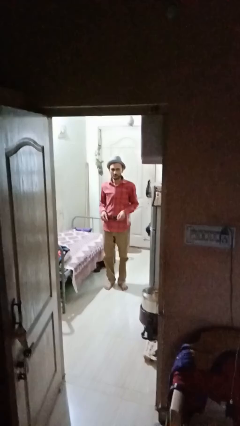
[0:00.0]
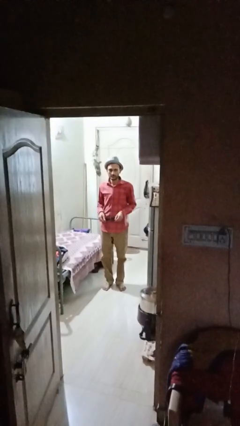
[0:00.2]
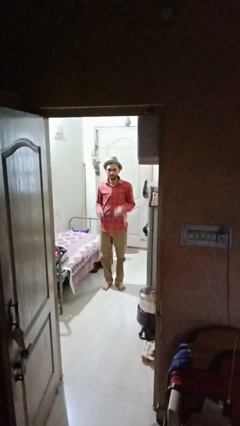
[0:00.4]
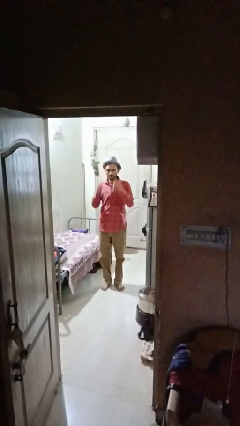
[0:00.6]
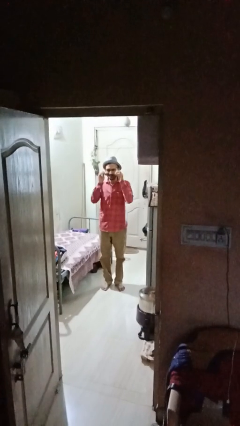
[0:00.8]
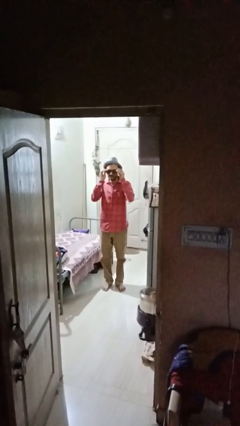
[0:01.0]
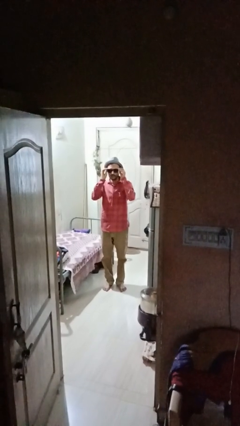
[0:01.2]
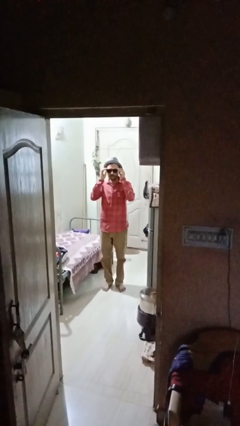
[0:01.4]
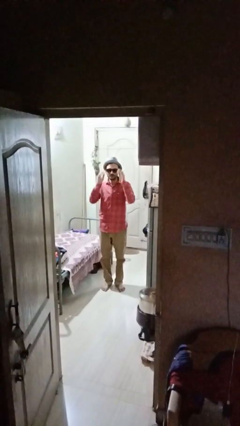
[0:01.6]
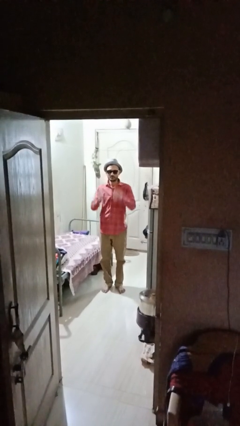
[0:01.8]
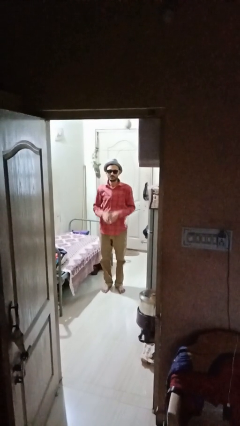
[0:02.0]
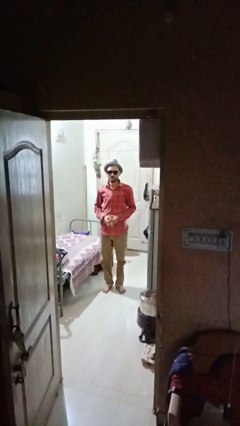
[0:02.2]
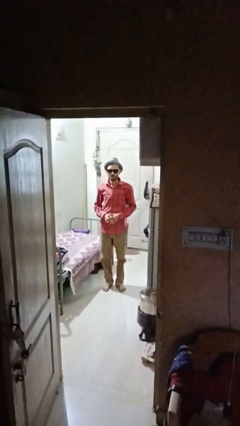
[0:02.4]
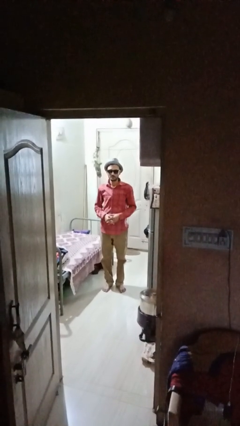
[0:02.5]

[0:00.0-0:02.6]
person puts on sunglasses

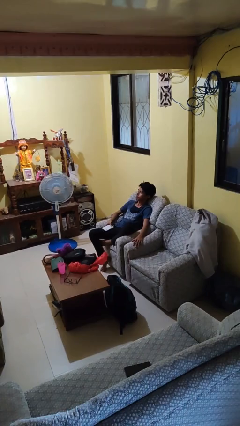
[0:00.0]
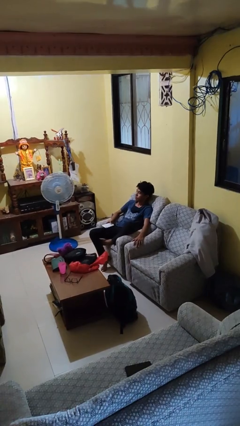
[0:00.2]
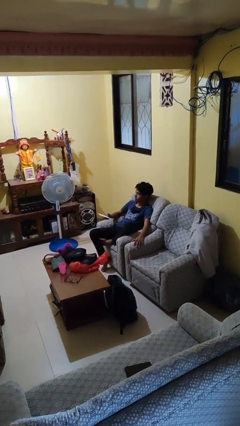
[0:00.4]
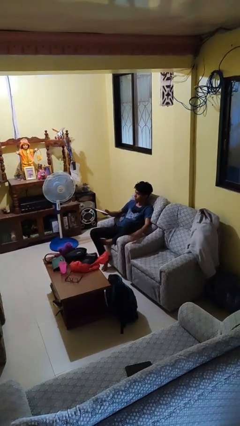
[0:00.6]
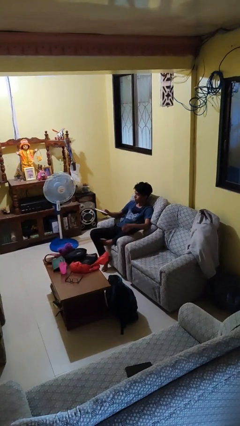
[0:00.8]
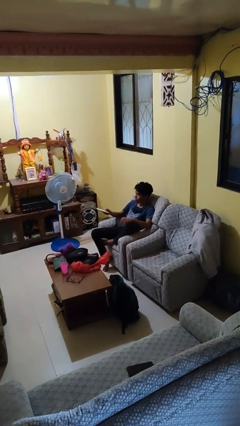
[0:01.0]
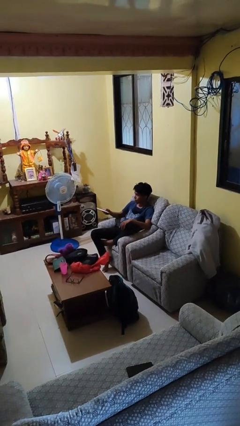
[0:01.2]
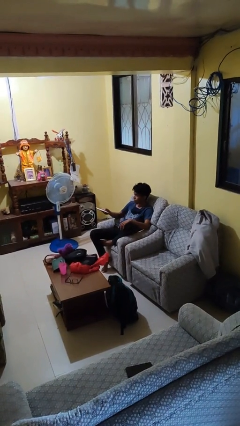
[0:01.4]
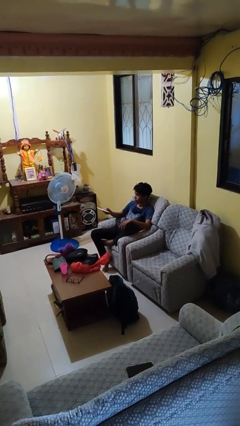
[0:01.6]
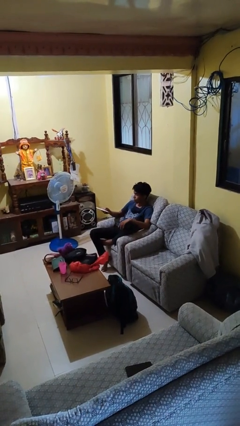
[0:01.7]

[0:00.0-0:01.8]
person uses television remote

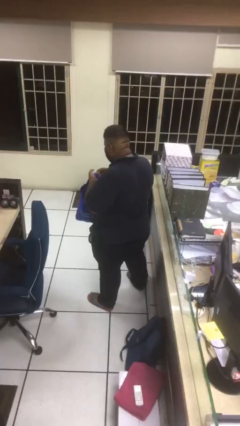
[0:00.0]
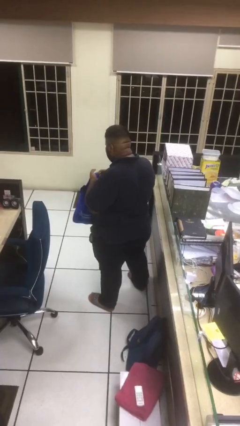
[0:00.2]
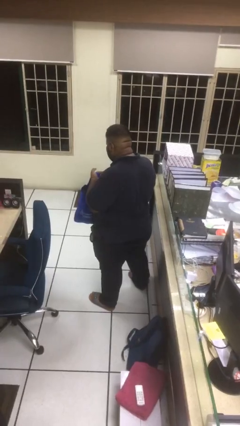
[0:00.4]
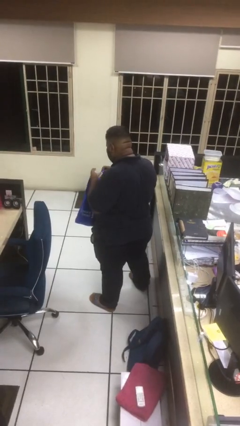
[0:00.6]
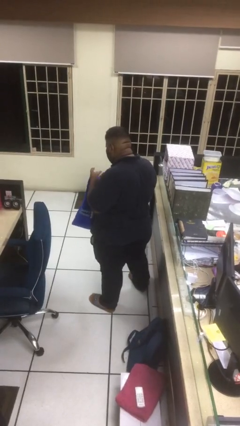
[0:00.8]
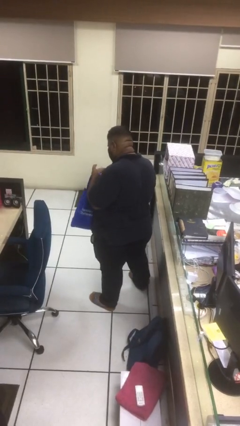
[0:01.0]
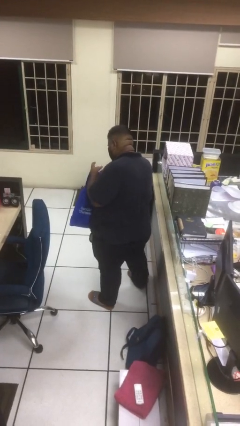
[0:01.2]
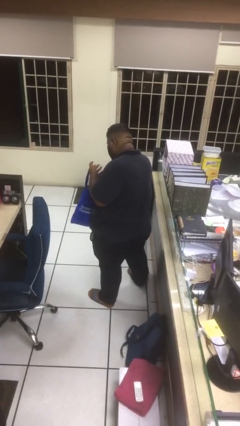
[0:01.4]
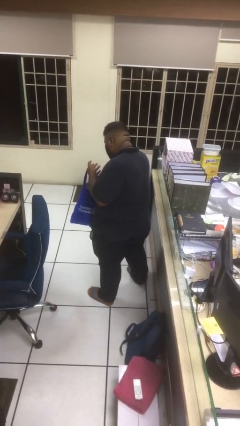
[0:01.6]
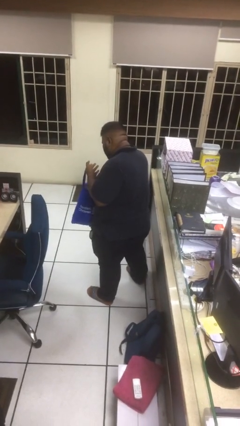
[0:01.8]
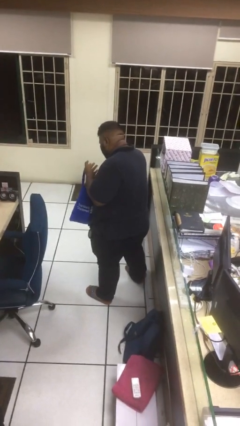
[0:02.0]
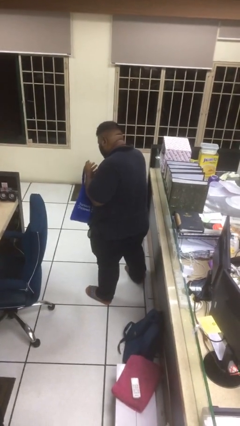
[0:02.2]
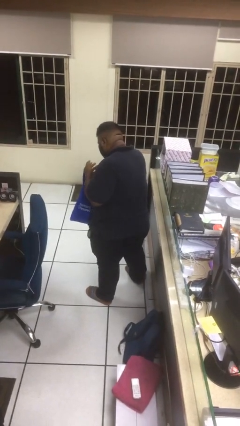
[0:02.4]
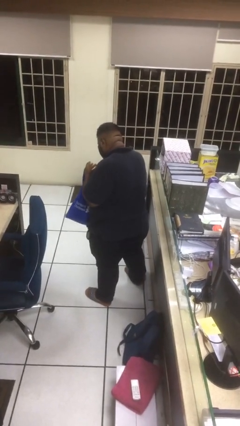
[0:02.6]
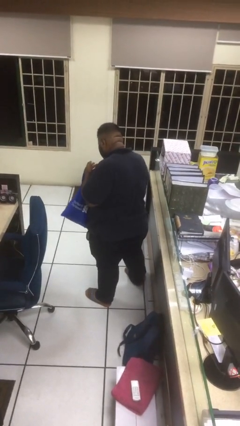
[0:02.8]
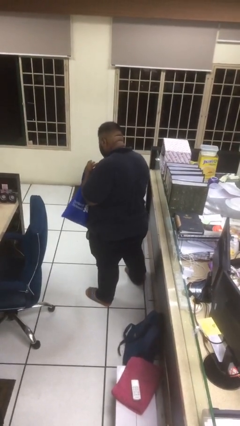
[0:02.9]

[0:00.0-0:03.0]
person searches in bag

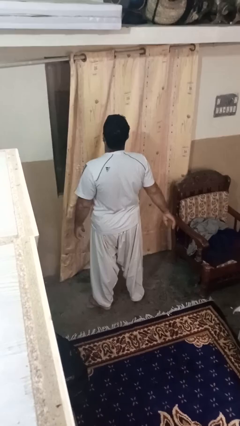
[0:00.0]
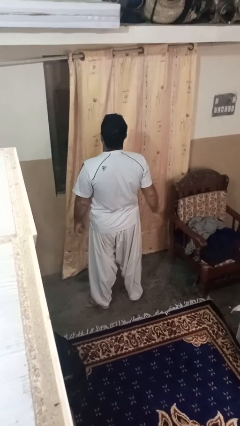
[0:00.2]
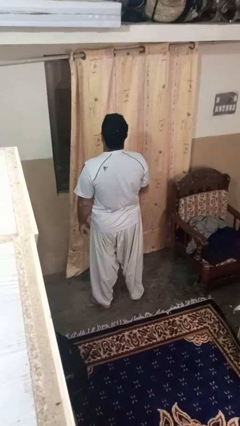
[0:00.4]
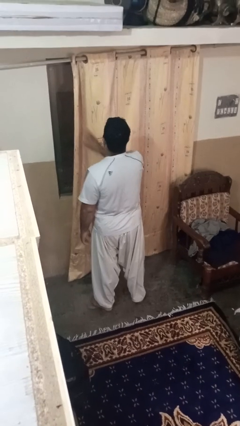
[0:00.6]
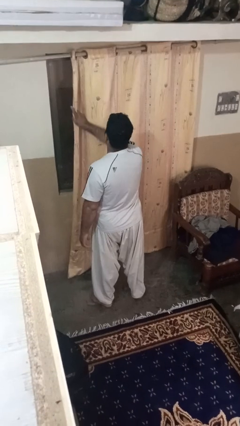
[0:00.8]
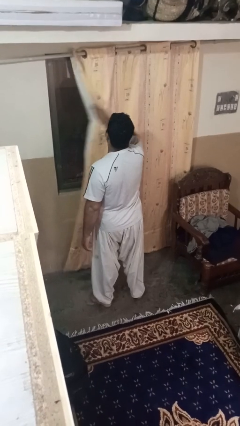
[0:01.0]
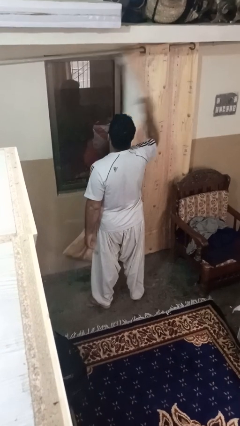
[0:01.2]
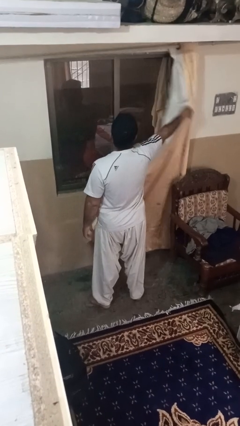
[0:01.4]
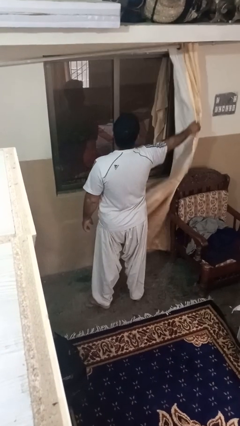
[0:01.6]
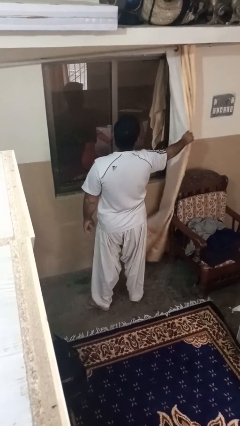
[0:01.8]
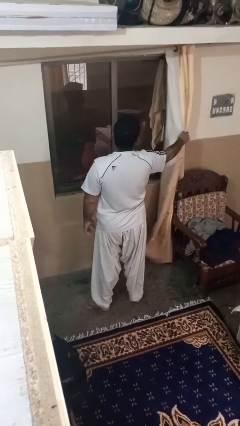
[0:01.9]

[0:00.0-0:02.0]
person opens curtains

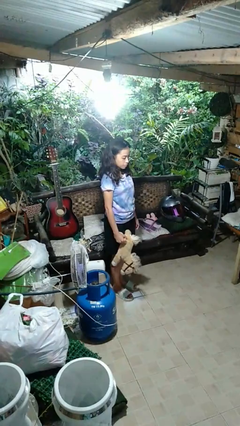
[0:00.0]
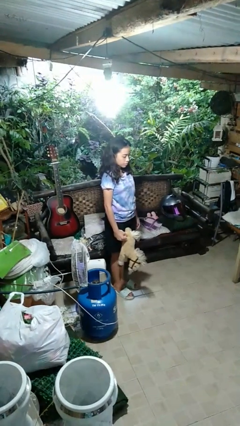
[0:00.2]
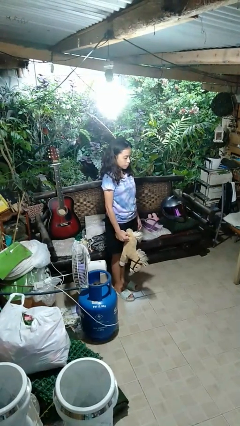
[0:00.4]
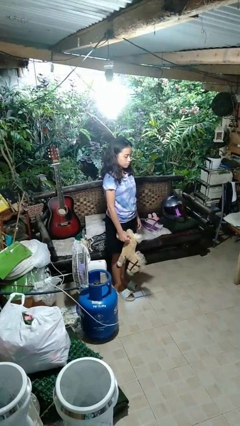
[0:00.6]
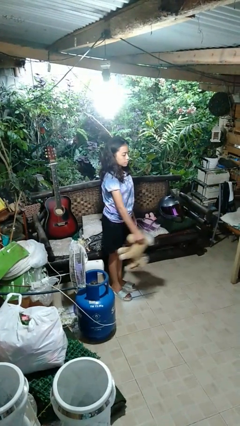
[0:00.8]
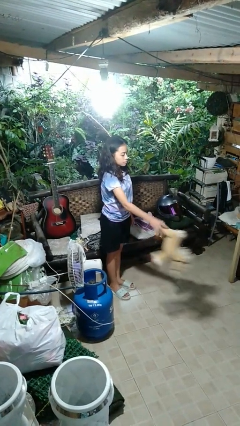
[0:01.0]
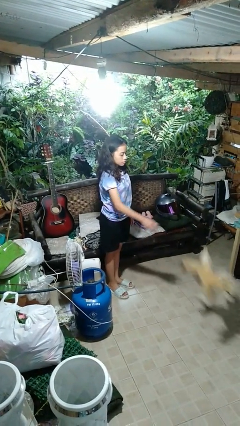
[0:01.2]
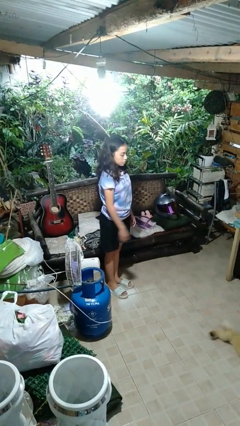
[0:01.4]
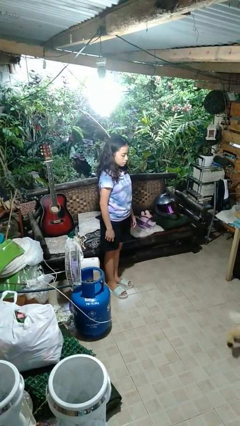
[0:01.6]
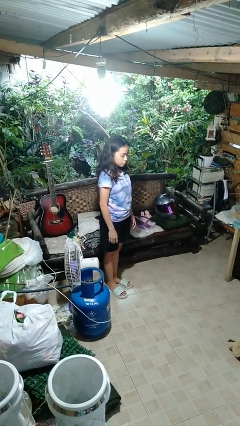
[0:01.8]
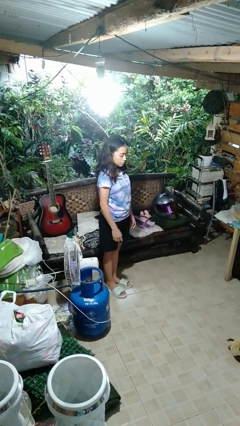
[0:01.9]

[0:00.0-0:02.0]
person throws object to ground

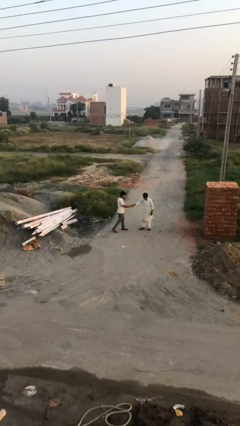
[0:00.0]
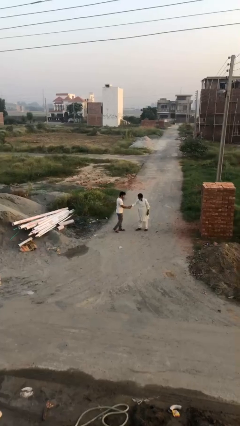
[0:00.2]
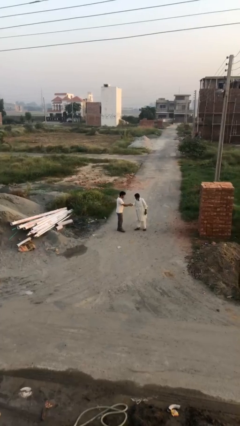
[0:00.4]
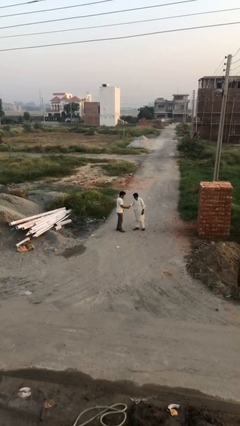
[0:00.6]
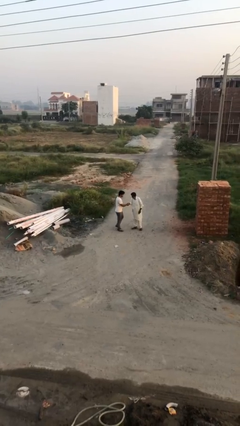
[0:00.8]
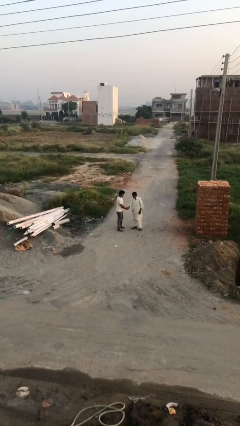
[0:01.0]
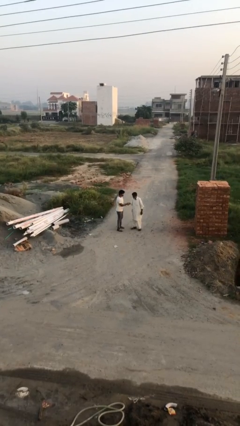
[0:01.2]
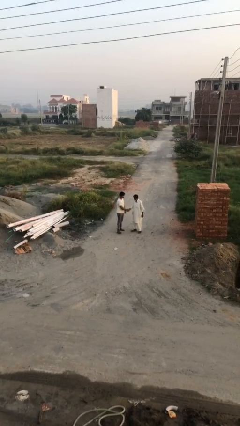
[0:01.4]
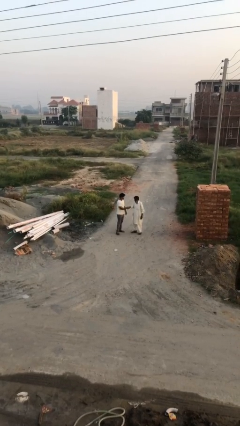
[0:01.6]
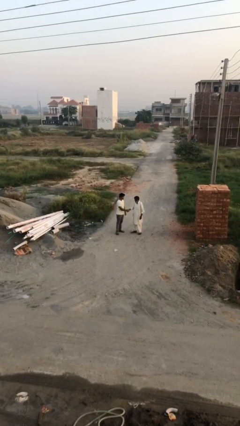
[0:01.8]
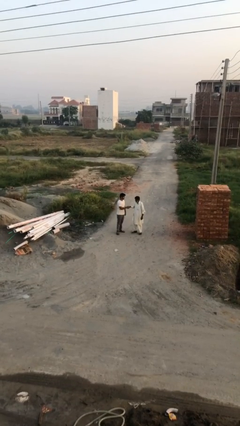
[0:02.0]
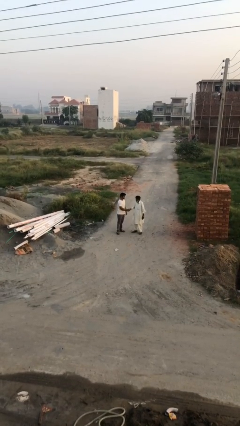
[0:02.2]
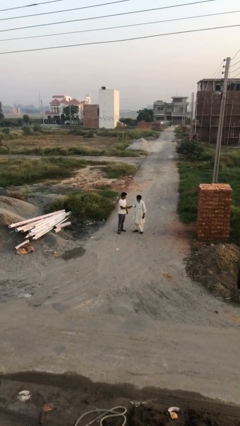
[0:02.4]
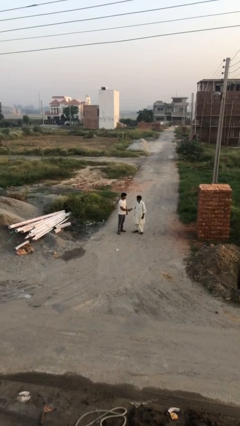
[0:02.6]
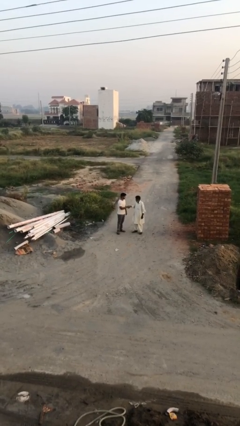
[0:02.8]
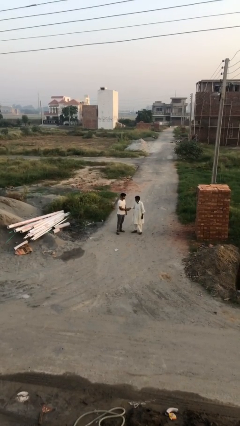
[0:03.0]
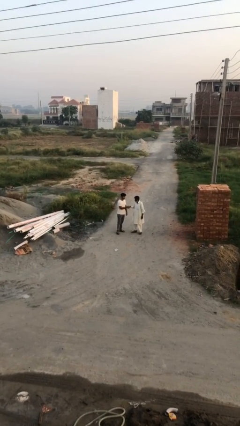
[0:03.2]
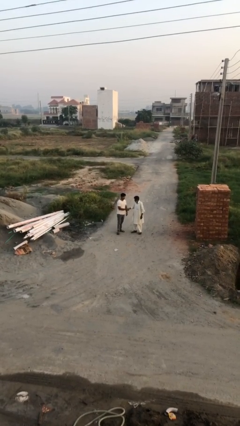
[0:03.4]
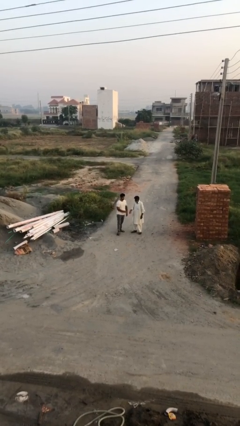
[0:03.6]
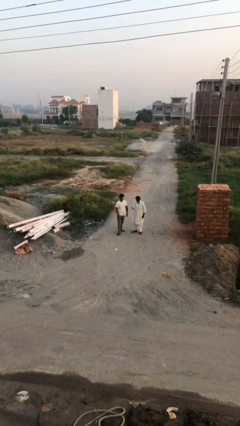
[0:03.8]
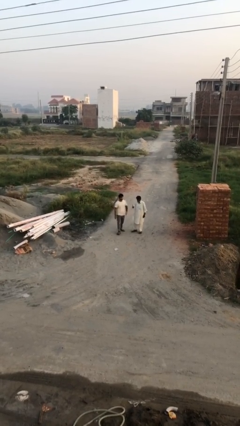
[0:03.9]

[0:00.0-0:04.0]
person shakes hand

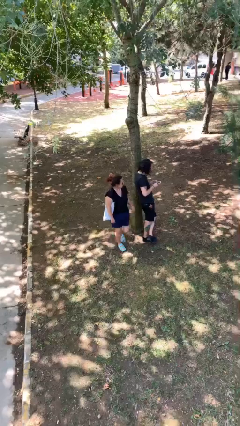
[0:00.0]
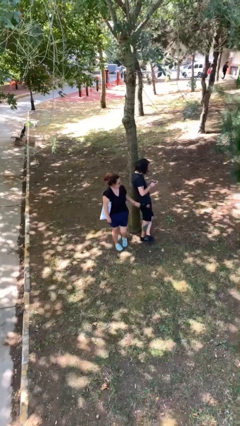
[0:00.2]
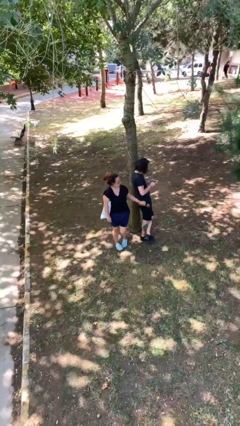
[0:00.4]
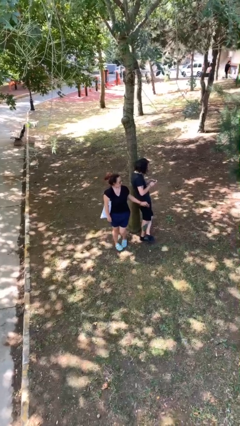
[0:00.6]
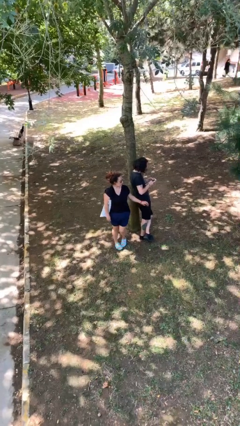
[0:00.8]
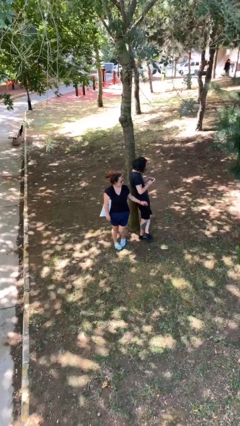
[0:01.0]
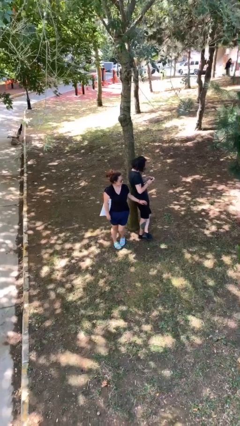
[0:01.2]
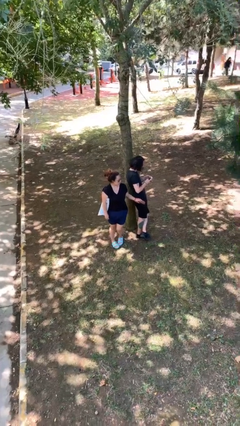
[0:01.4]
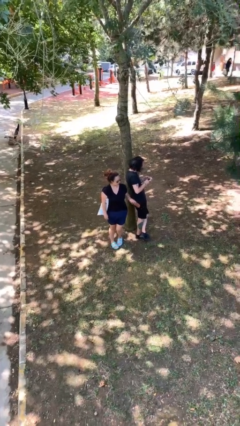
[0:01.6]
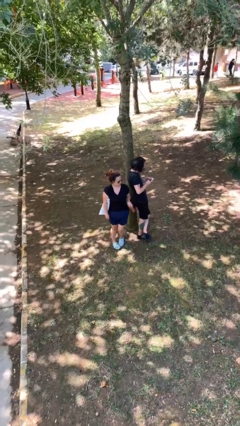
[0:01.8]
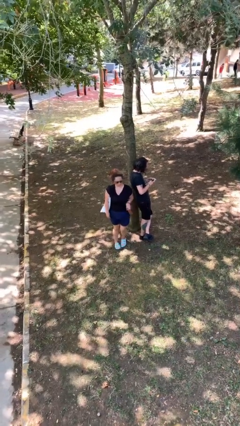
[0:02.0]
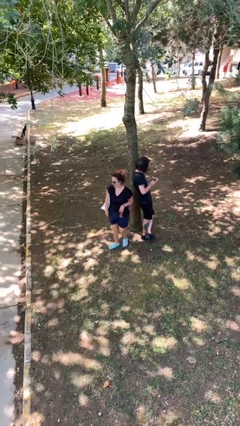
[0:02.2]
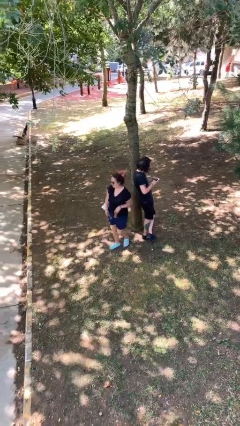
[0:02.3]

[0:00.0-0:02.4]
person steals object from person
